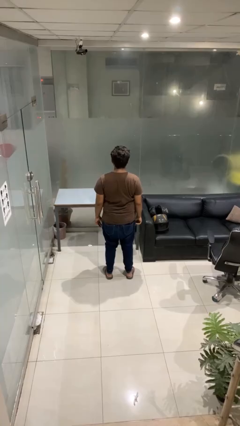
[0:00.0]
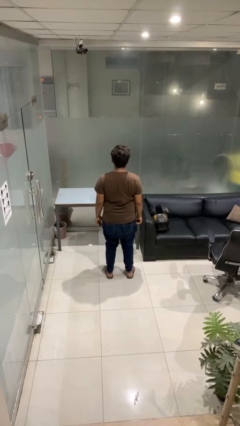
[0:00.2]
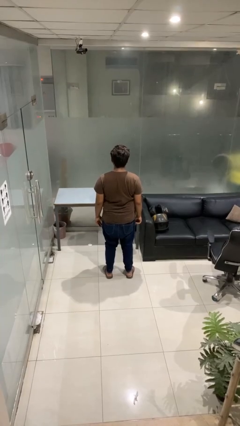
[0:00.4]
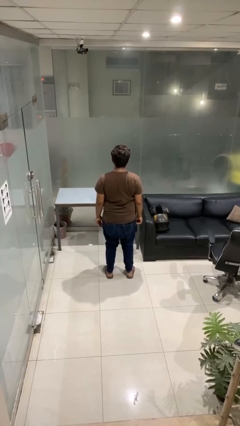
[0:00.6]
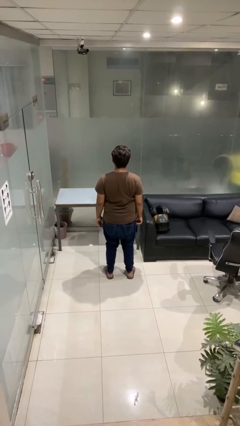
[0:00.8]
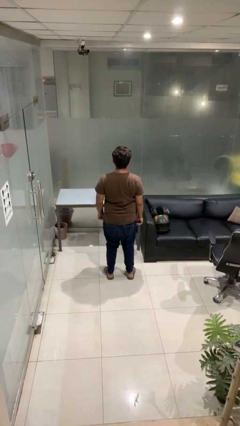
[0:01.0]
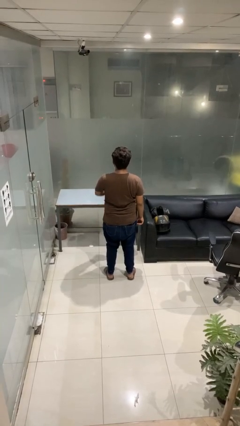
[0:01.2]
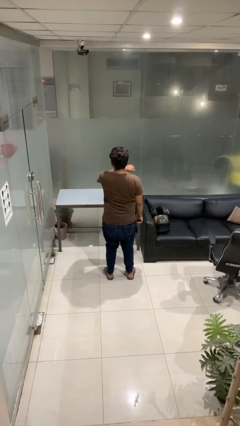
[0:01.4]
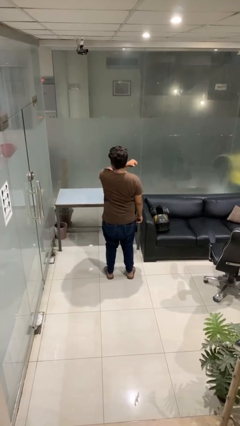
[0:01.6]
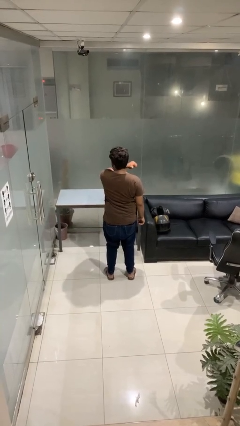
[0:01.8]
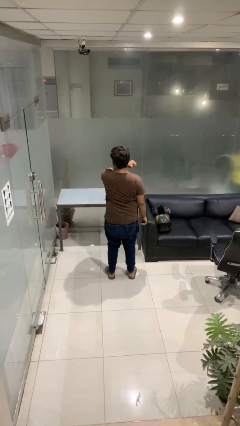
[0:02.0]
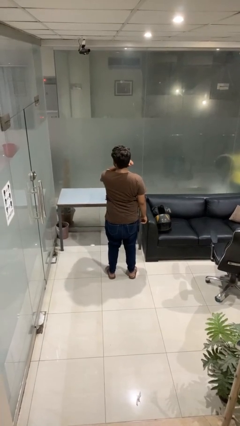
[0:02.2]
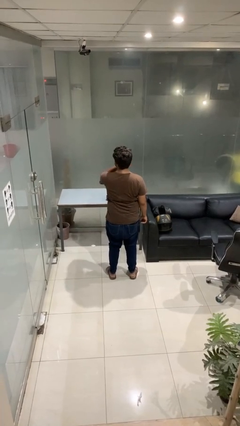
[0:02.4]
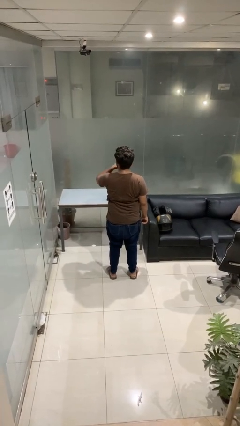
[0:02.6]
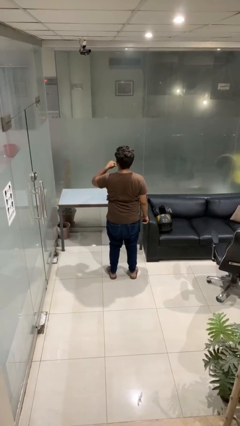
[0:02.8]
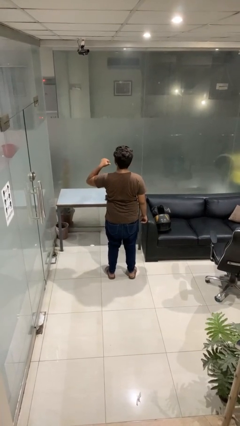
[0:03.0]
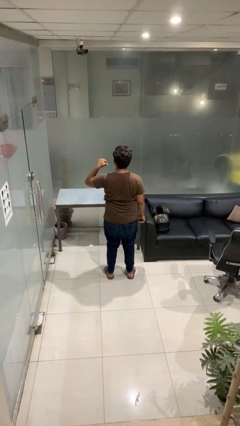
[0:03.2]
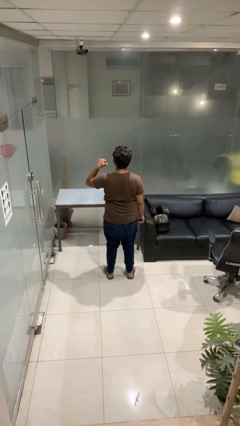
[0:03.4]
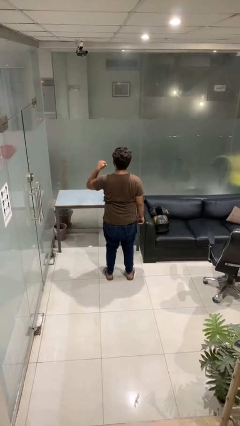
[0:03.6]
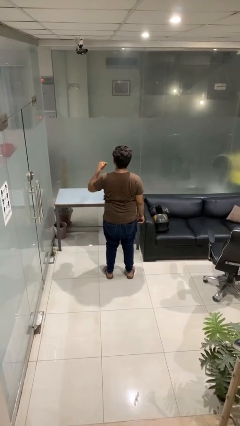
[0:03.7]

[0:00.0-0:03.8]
person gestures cut

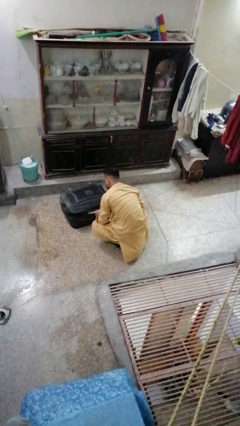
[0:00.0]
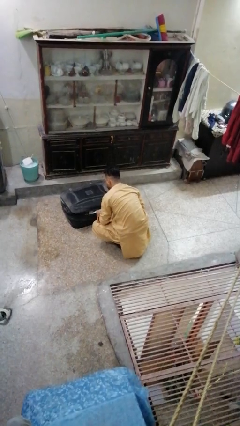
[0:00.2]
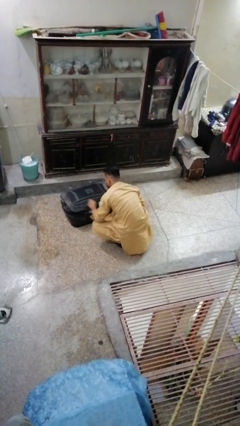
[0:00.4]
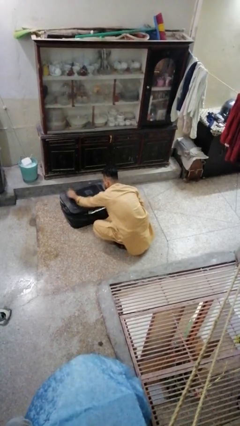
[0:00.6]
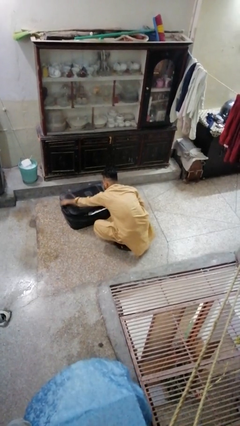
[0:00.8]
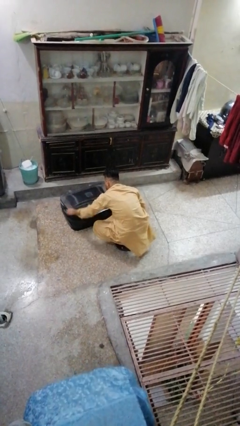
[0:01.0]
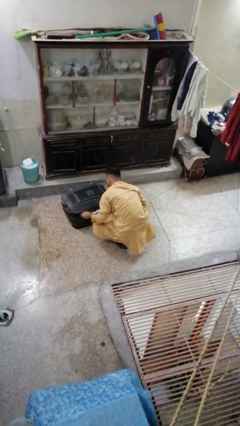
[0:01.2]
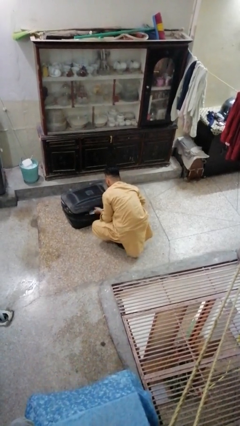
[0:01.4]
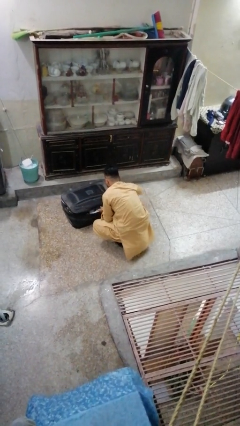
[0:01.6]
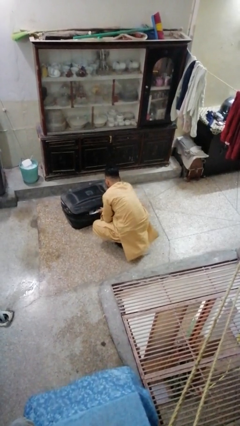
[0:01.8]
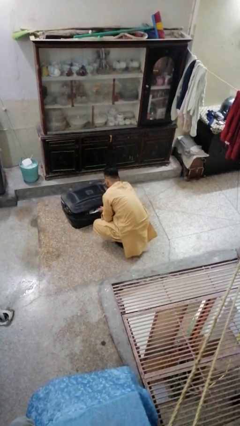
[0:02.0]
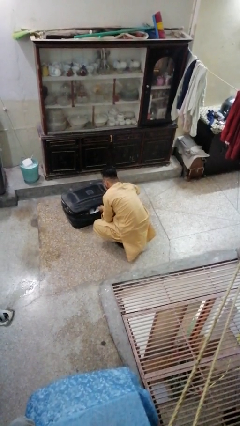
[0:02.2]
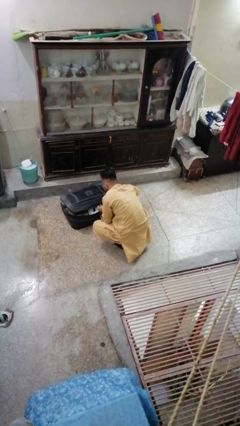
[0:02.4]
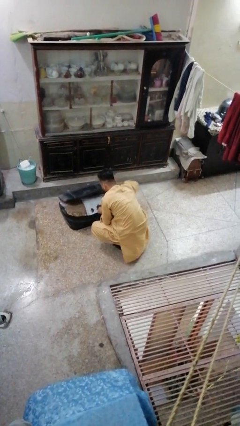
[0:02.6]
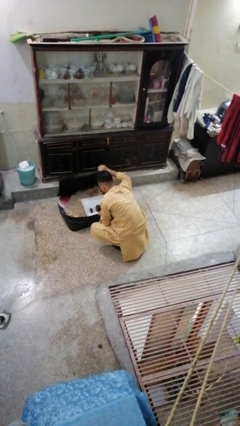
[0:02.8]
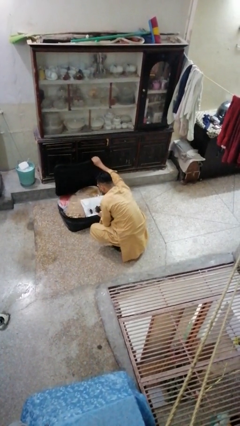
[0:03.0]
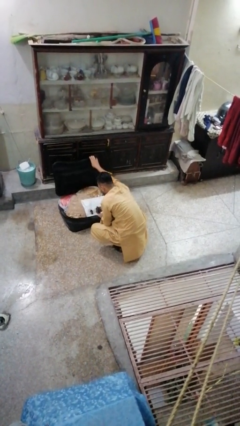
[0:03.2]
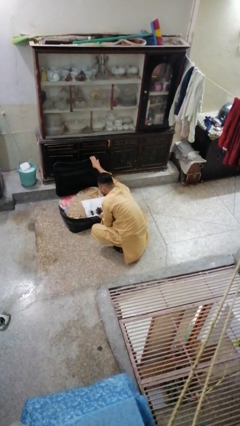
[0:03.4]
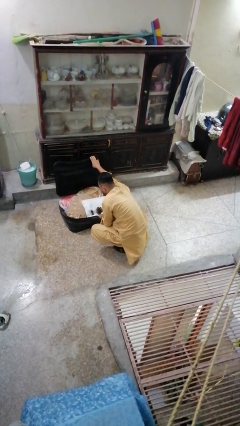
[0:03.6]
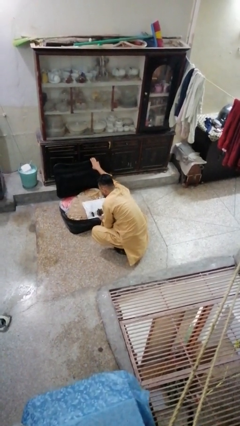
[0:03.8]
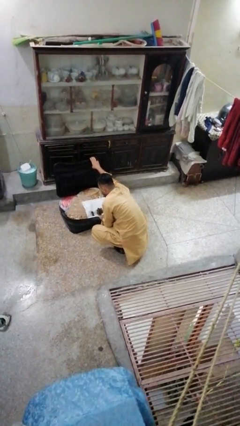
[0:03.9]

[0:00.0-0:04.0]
person opens suitcase

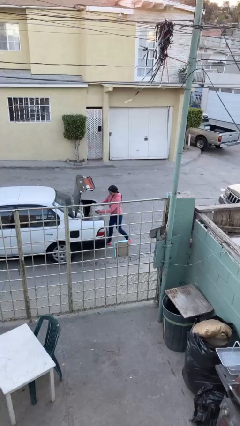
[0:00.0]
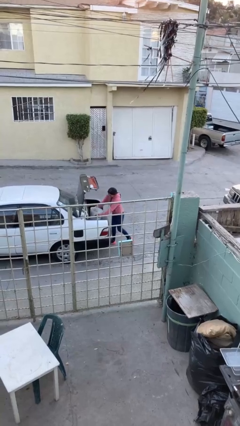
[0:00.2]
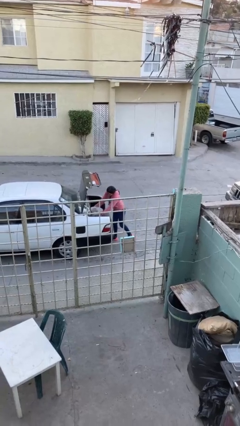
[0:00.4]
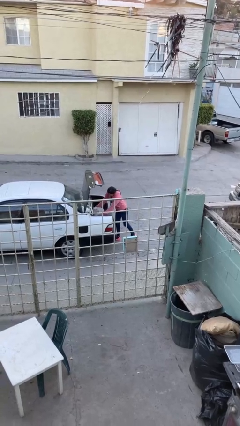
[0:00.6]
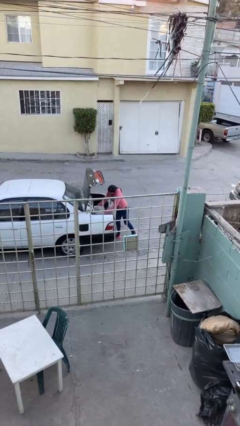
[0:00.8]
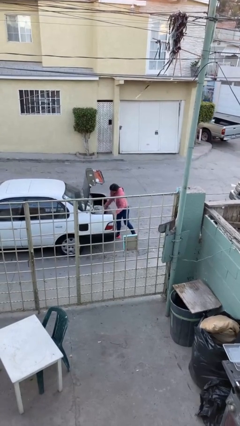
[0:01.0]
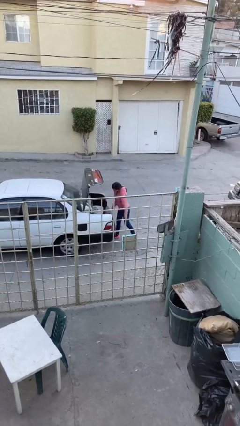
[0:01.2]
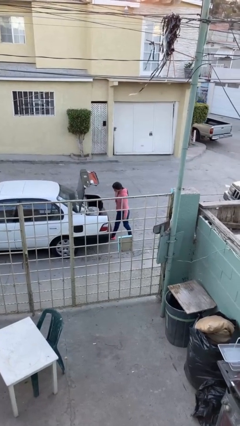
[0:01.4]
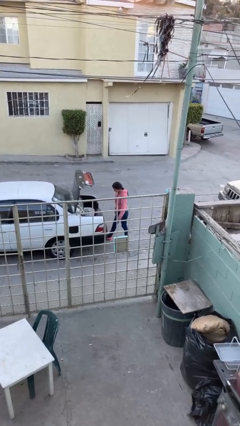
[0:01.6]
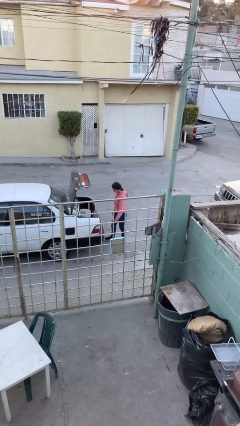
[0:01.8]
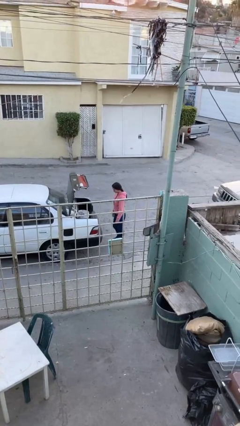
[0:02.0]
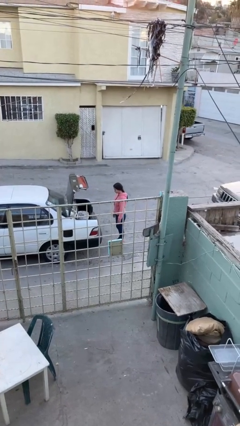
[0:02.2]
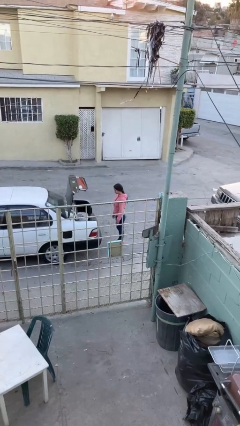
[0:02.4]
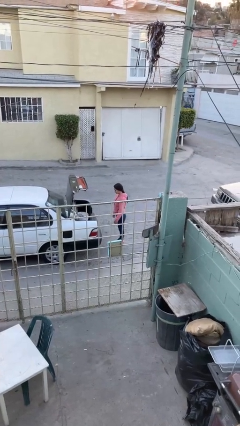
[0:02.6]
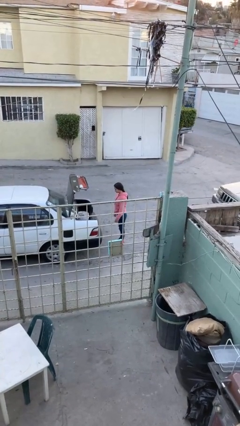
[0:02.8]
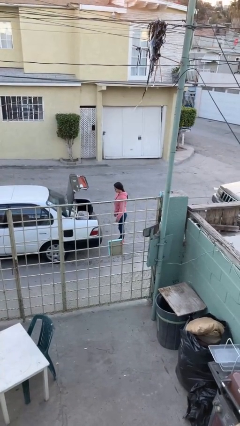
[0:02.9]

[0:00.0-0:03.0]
person loads car

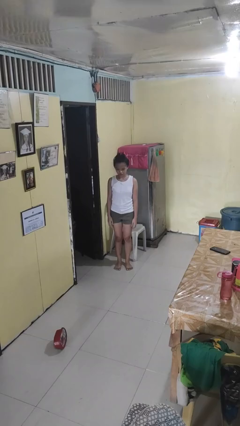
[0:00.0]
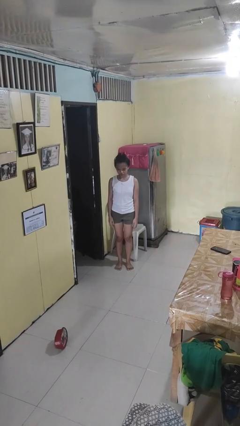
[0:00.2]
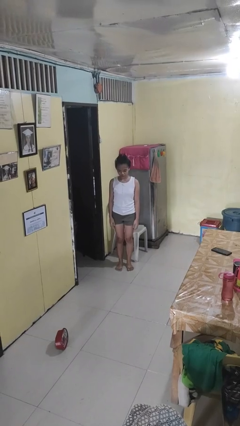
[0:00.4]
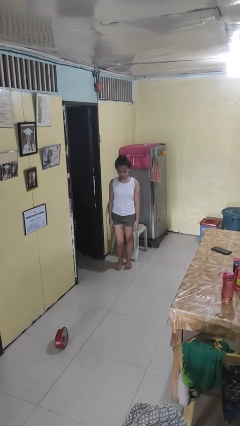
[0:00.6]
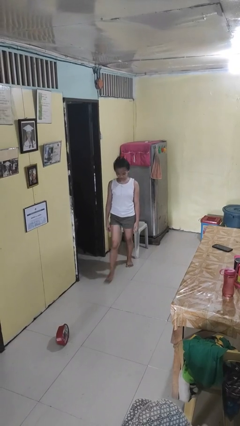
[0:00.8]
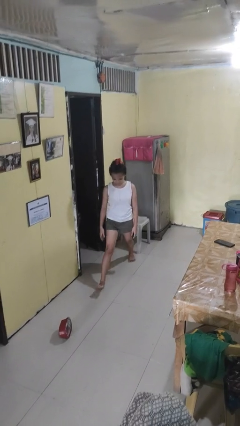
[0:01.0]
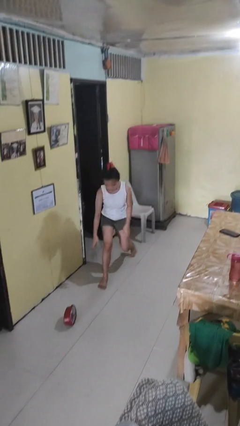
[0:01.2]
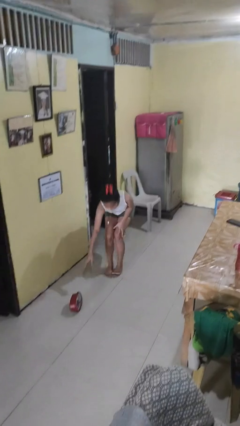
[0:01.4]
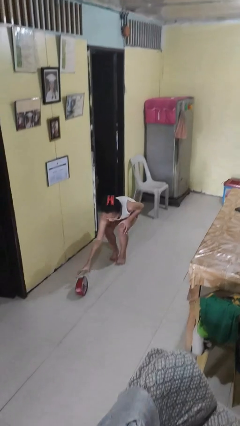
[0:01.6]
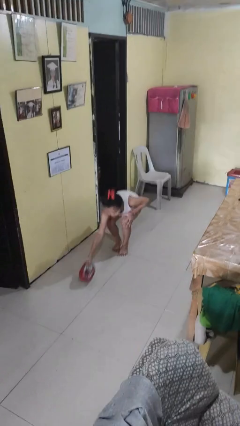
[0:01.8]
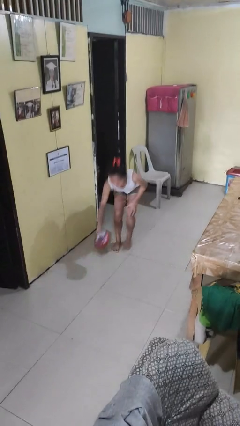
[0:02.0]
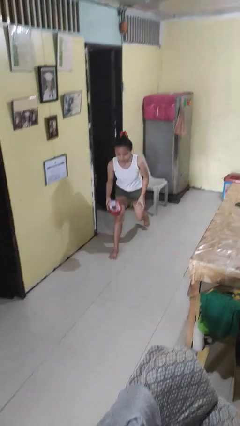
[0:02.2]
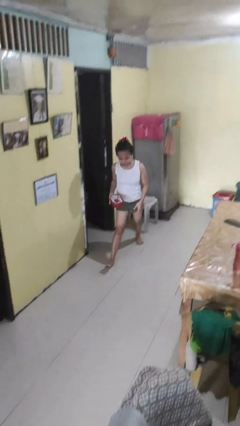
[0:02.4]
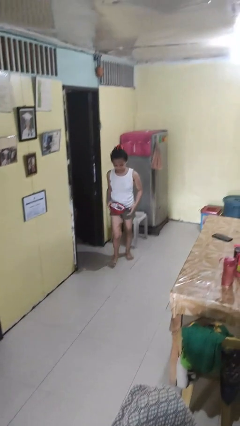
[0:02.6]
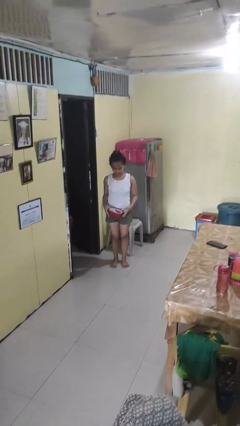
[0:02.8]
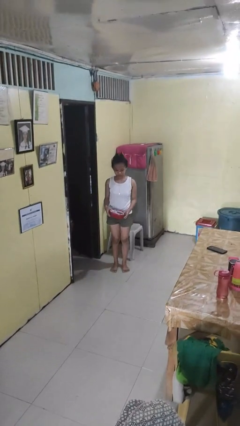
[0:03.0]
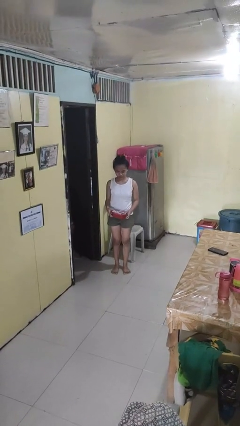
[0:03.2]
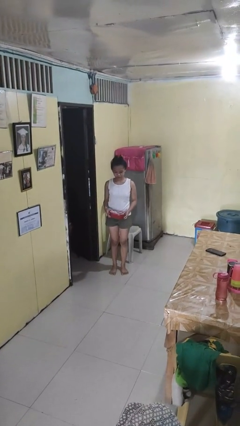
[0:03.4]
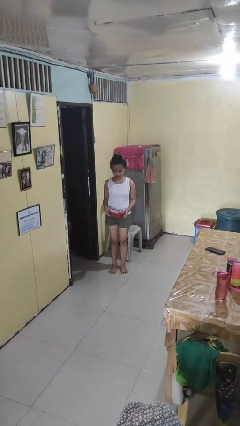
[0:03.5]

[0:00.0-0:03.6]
person picks up object from floor

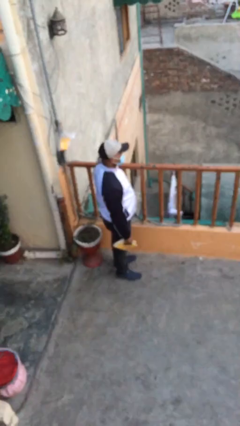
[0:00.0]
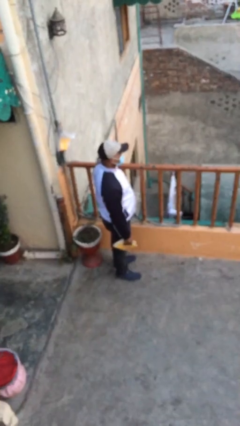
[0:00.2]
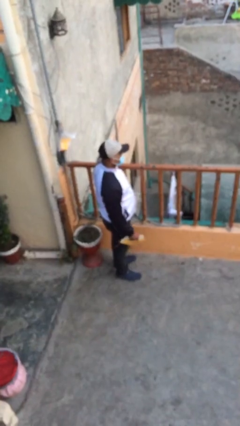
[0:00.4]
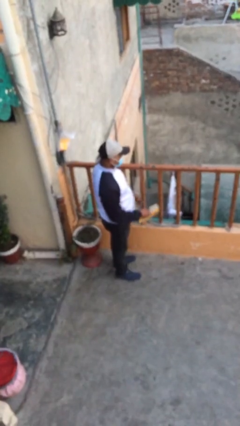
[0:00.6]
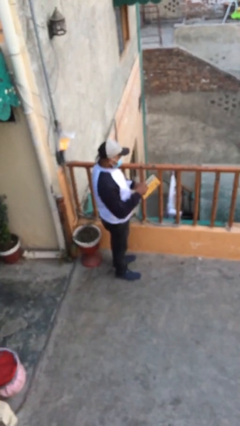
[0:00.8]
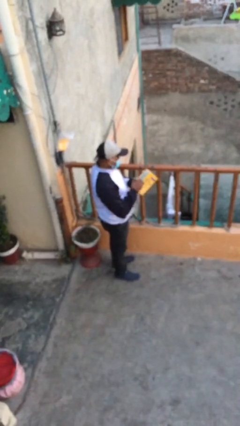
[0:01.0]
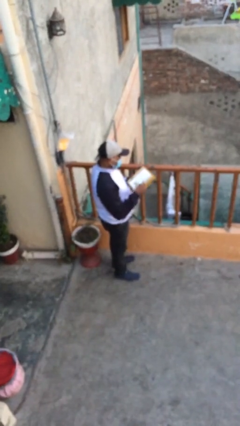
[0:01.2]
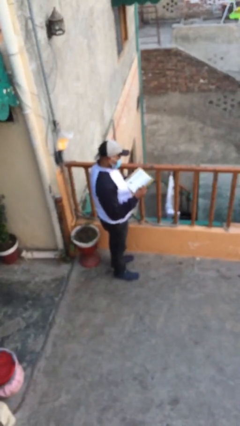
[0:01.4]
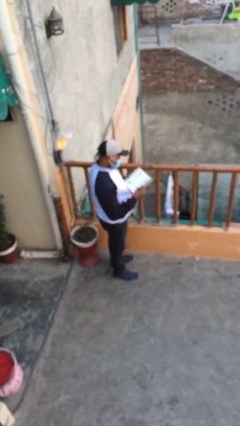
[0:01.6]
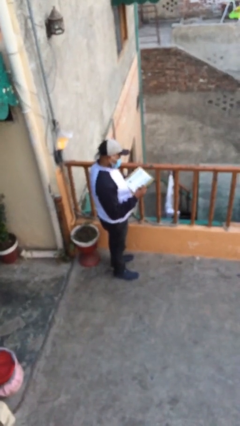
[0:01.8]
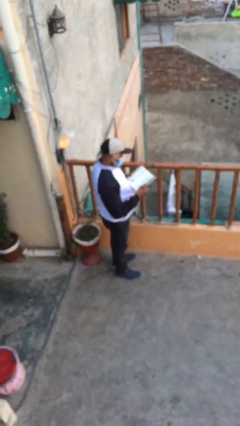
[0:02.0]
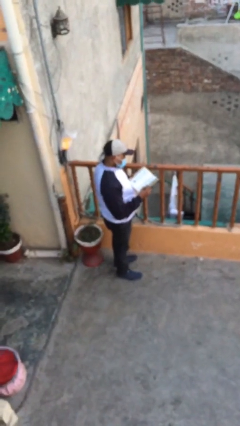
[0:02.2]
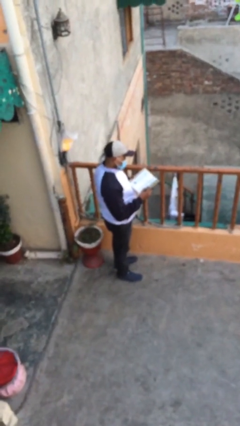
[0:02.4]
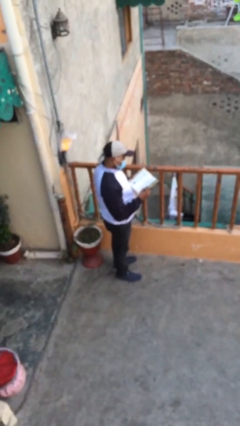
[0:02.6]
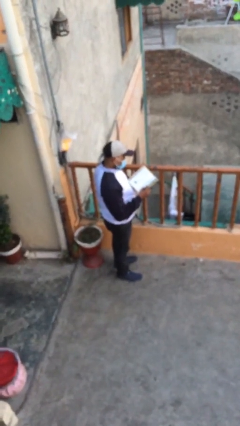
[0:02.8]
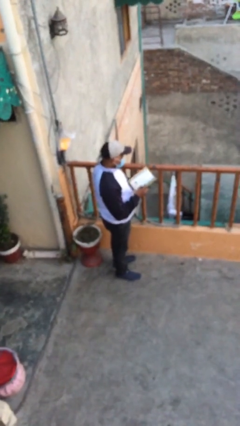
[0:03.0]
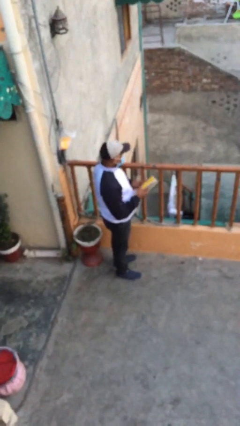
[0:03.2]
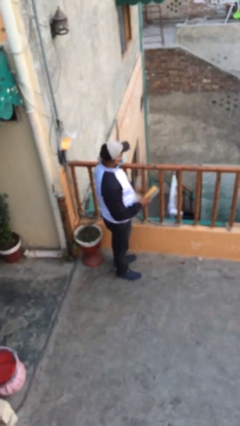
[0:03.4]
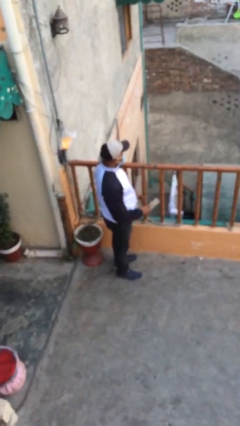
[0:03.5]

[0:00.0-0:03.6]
person reads document
